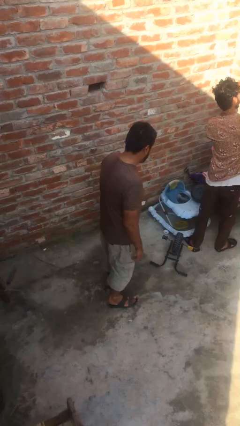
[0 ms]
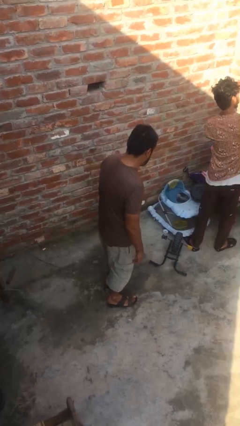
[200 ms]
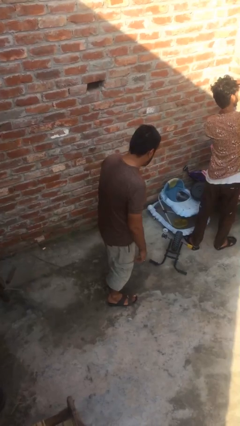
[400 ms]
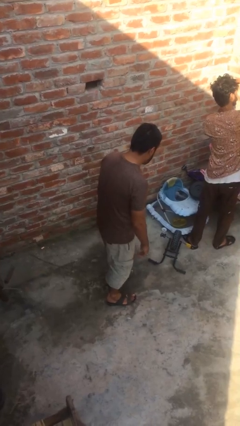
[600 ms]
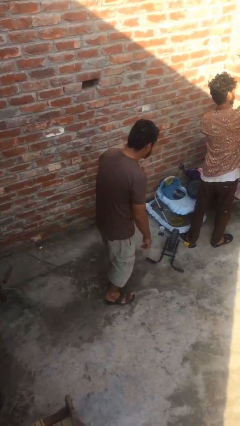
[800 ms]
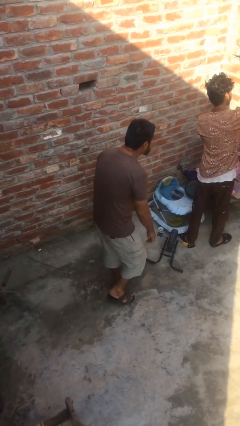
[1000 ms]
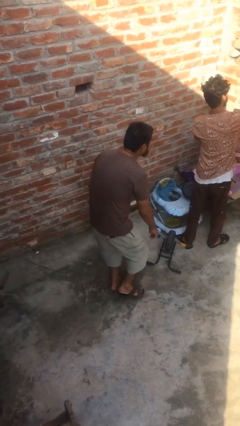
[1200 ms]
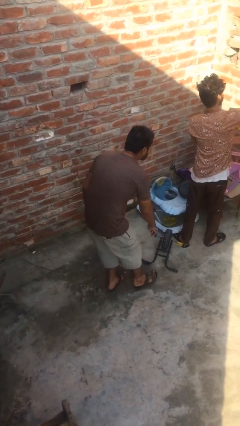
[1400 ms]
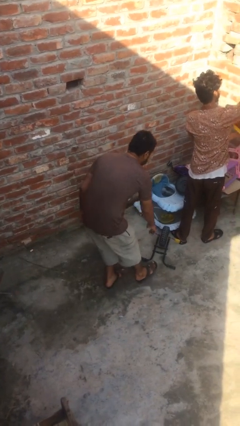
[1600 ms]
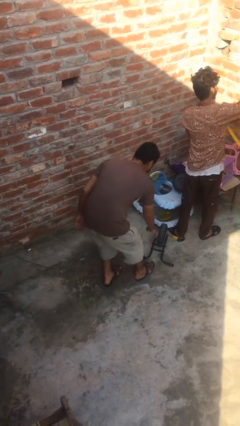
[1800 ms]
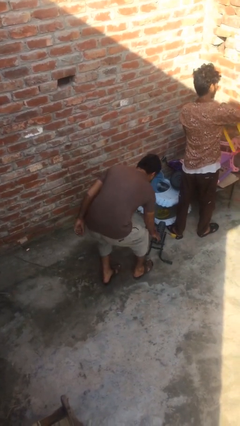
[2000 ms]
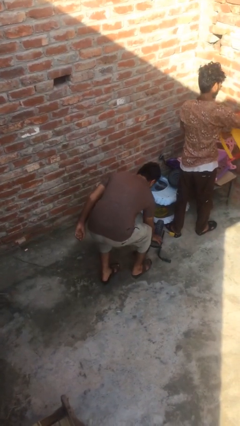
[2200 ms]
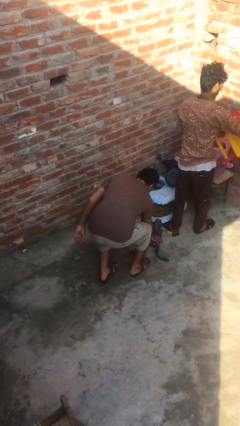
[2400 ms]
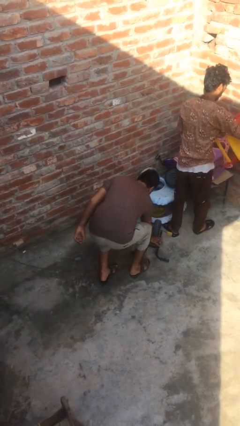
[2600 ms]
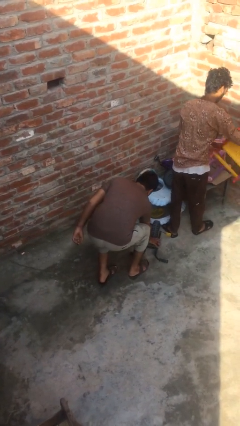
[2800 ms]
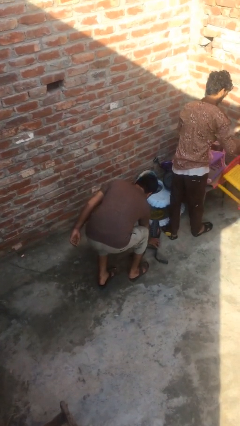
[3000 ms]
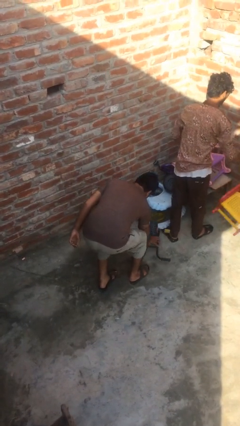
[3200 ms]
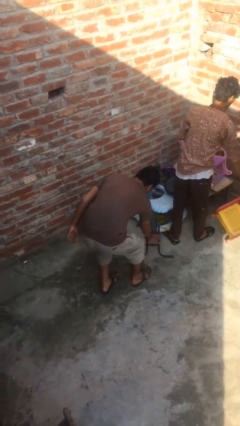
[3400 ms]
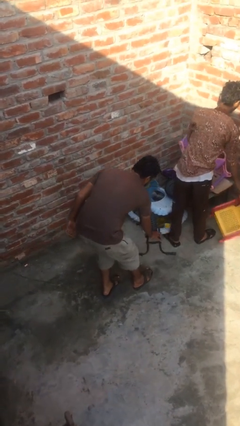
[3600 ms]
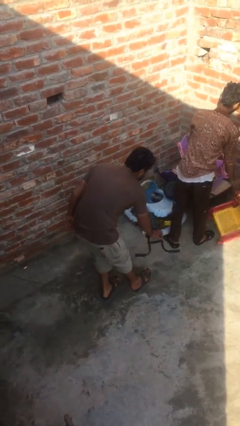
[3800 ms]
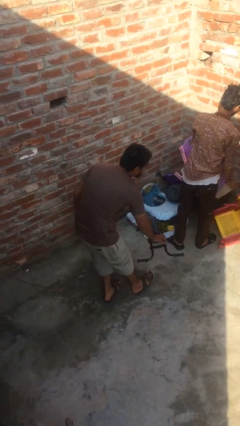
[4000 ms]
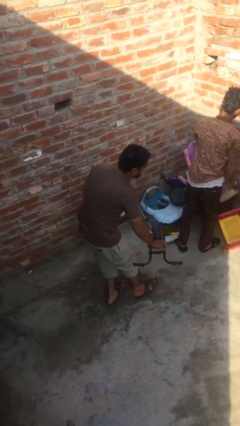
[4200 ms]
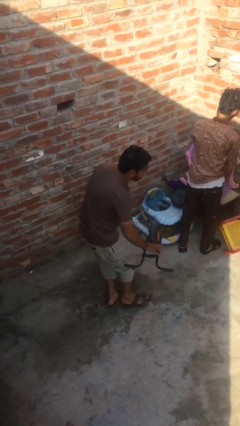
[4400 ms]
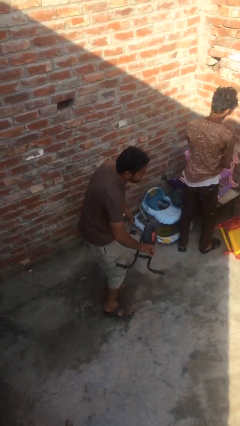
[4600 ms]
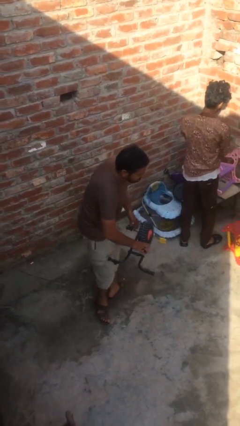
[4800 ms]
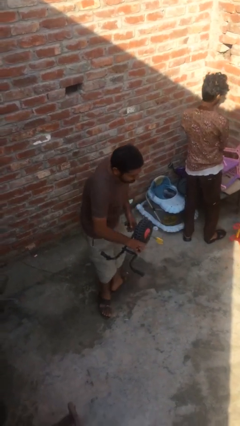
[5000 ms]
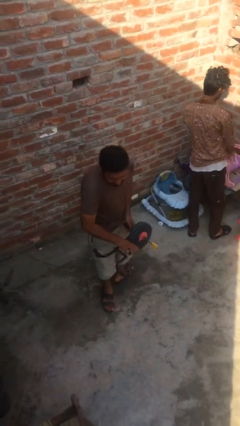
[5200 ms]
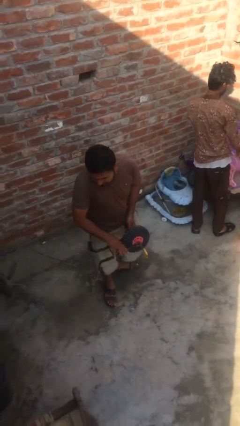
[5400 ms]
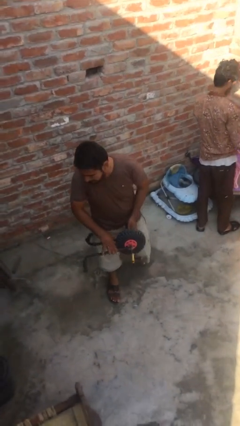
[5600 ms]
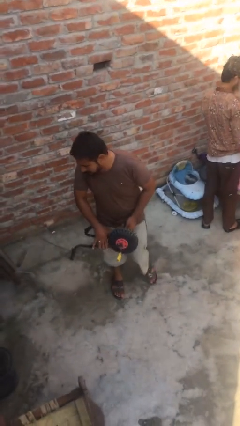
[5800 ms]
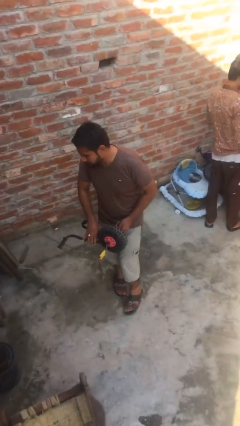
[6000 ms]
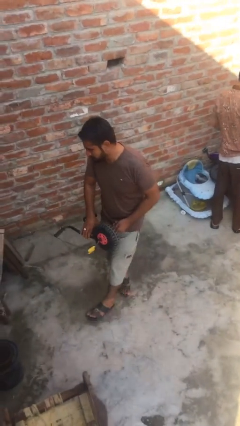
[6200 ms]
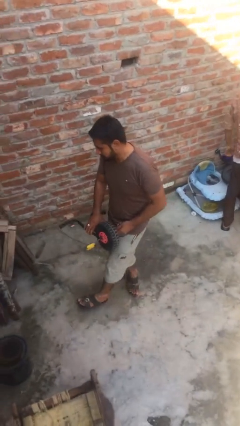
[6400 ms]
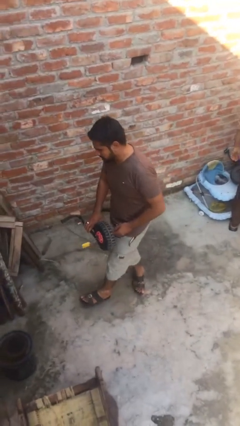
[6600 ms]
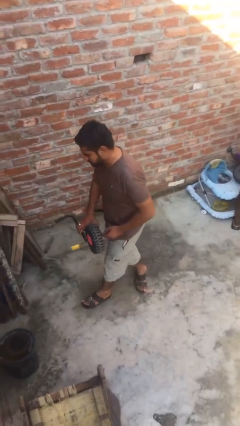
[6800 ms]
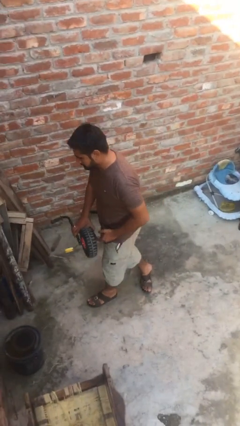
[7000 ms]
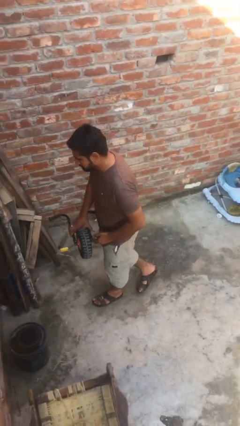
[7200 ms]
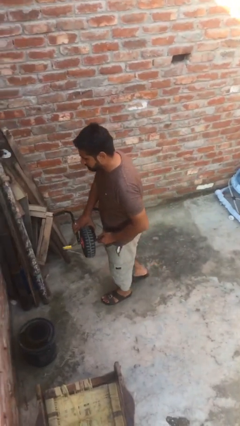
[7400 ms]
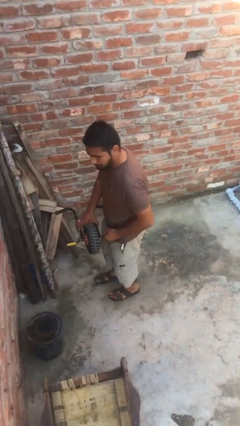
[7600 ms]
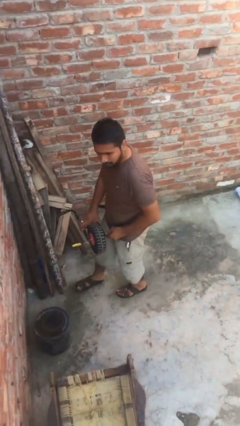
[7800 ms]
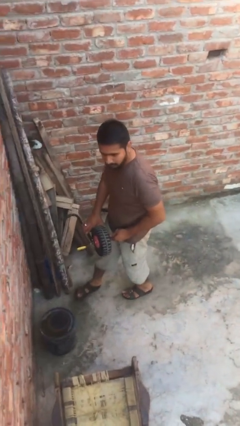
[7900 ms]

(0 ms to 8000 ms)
person steals object from person

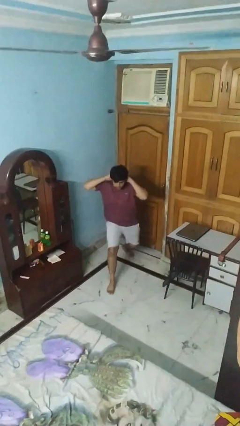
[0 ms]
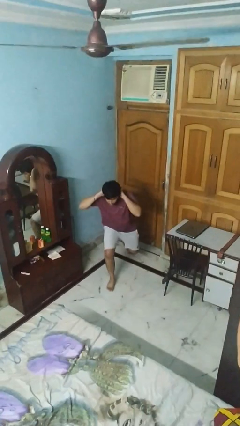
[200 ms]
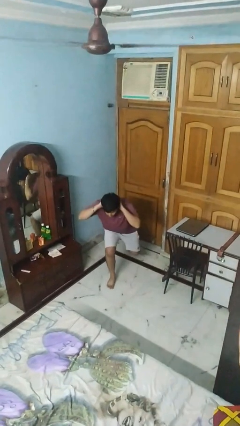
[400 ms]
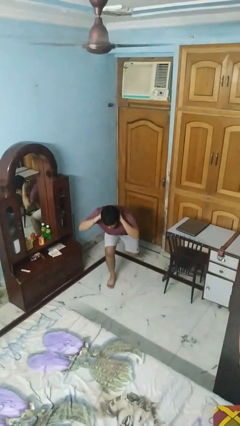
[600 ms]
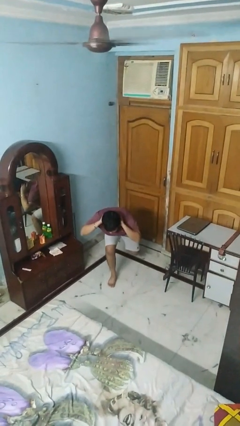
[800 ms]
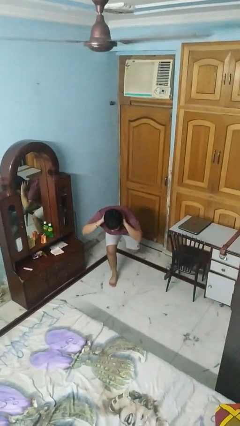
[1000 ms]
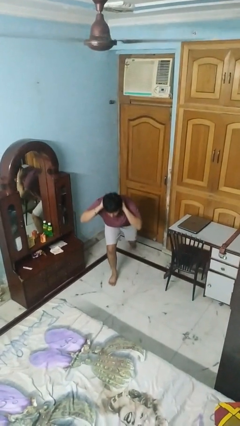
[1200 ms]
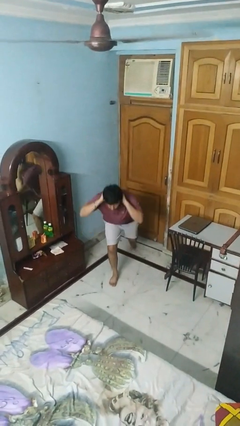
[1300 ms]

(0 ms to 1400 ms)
person exercises with lunges

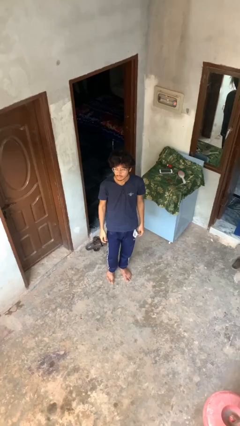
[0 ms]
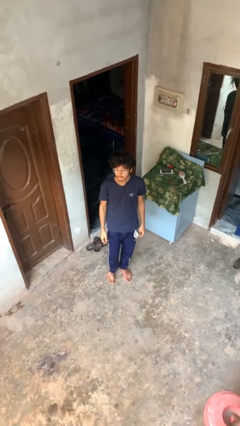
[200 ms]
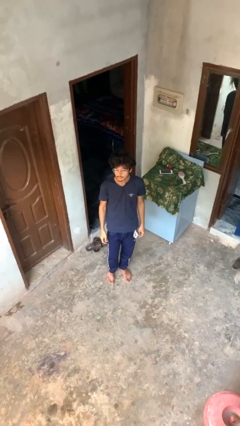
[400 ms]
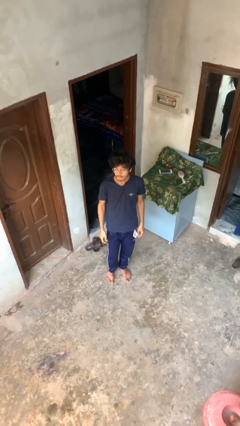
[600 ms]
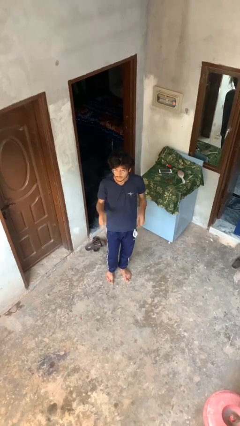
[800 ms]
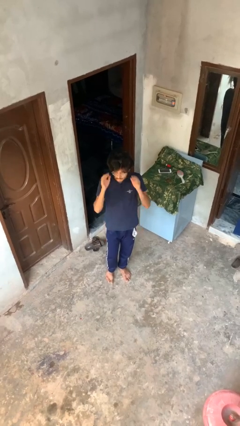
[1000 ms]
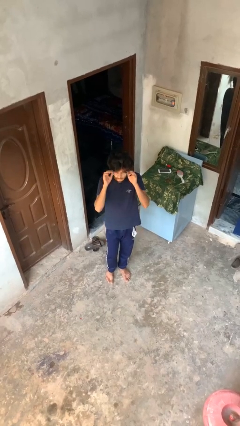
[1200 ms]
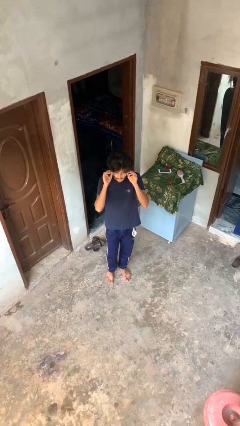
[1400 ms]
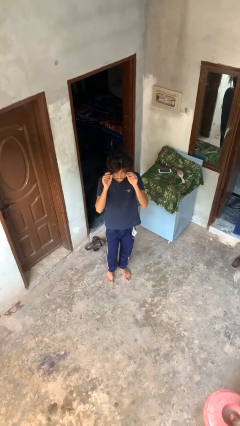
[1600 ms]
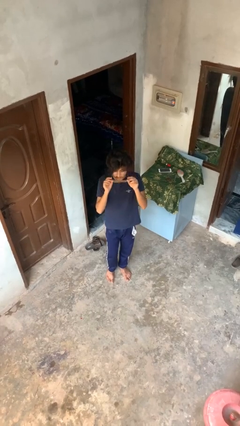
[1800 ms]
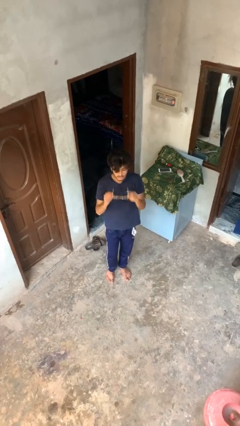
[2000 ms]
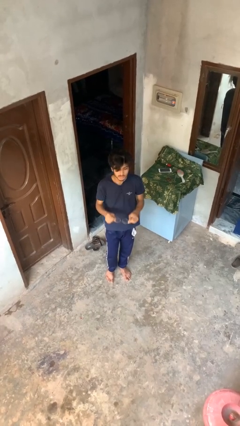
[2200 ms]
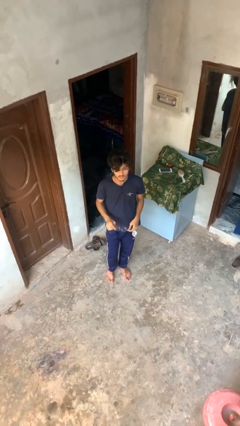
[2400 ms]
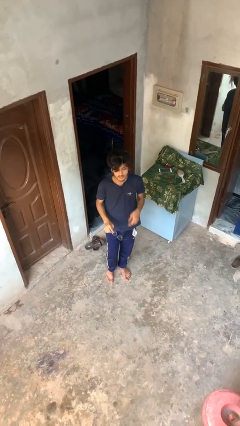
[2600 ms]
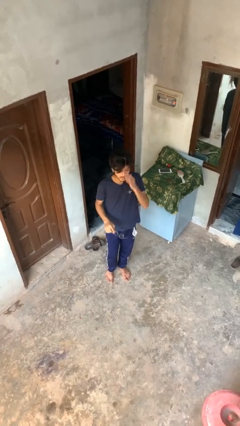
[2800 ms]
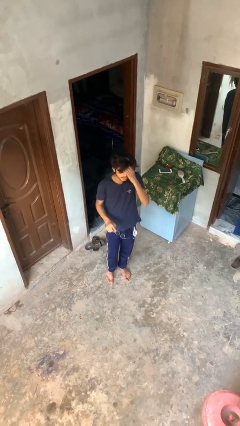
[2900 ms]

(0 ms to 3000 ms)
person takes off glasses

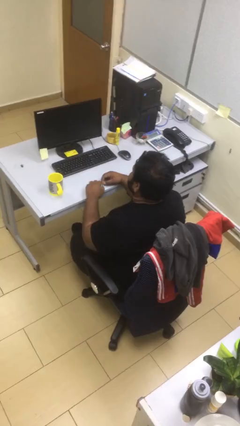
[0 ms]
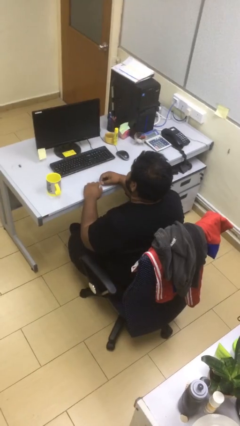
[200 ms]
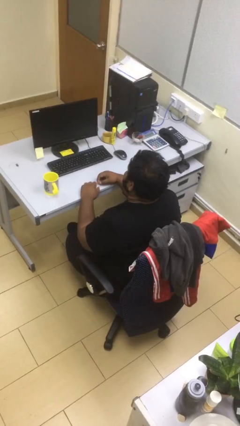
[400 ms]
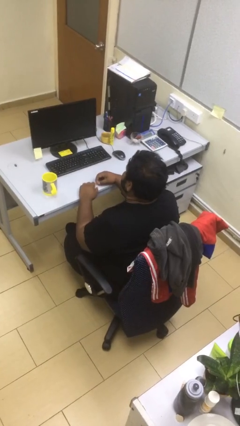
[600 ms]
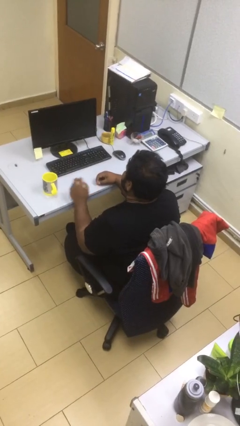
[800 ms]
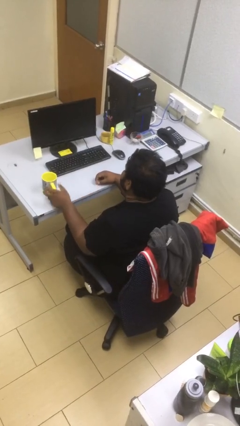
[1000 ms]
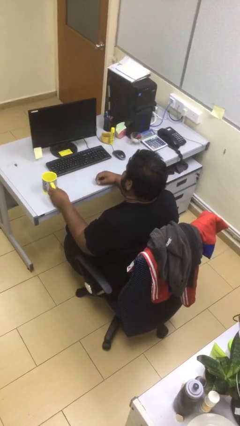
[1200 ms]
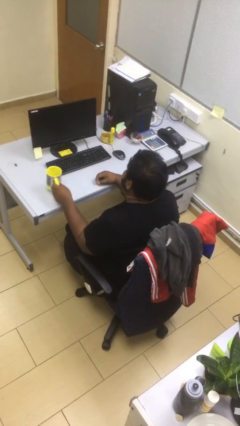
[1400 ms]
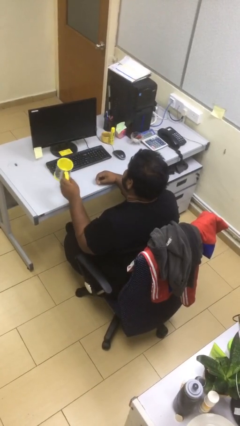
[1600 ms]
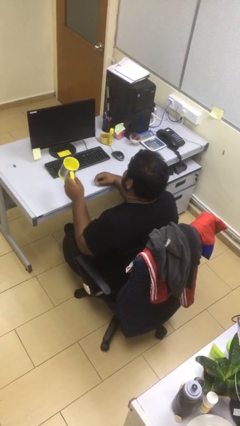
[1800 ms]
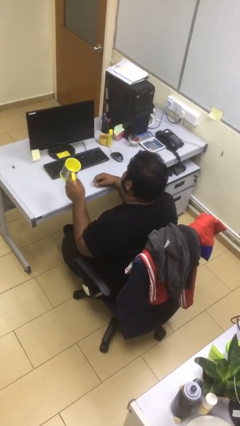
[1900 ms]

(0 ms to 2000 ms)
person picks up object from table

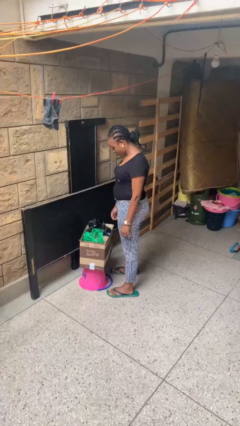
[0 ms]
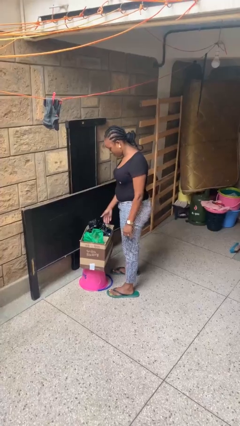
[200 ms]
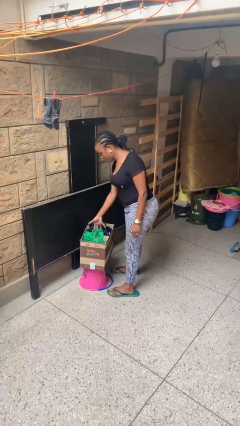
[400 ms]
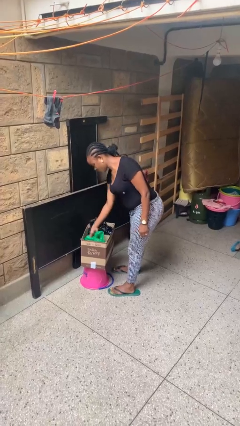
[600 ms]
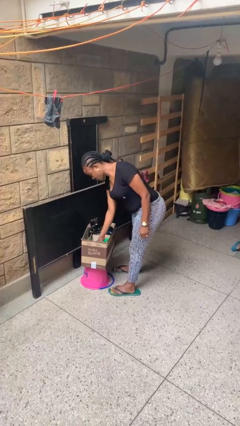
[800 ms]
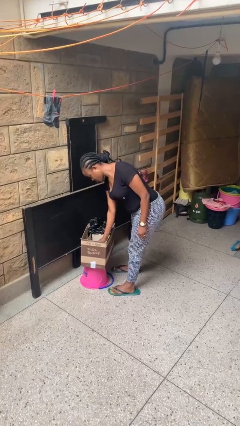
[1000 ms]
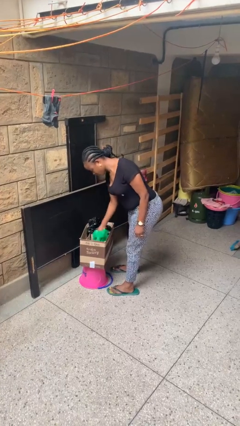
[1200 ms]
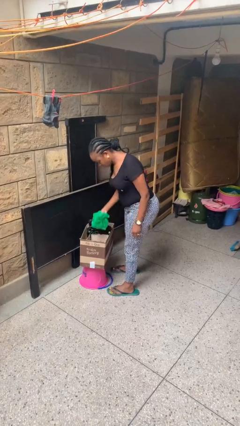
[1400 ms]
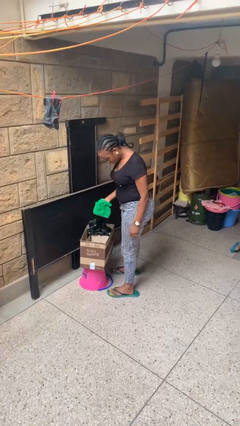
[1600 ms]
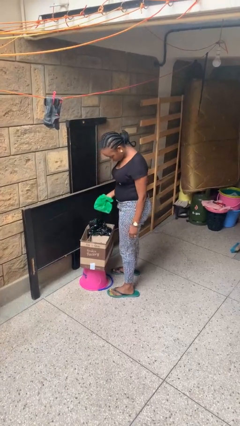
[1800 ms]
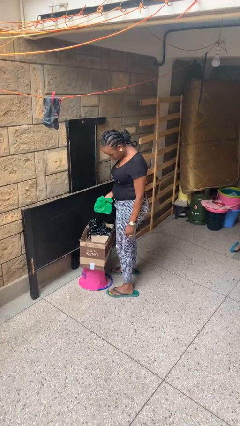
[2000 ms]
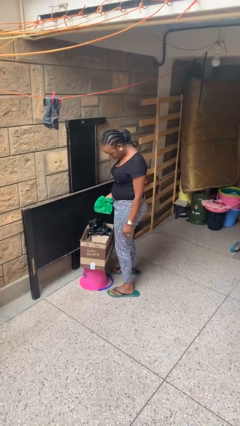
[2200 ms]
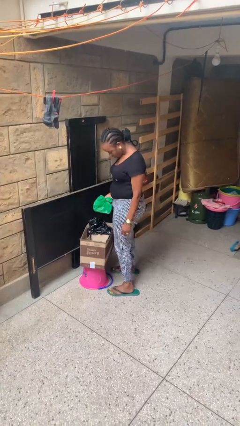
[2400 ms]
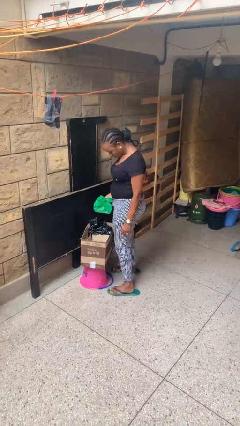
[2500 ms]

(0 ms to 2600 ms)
person takes object from box

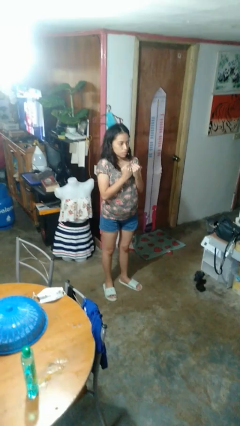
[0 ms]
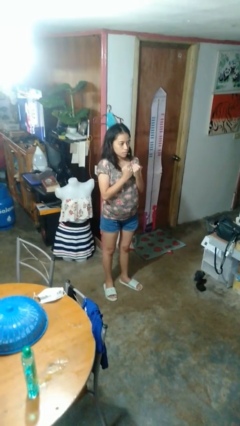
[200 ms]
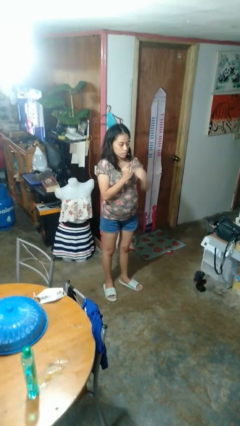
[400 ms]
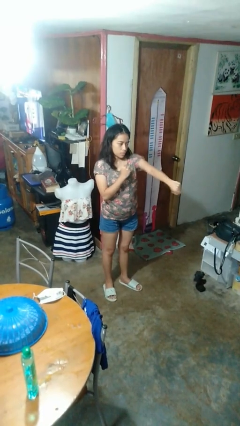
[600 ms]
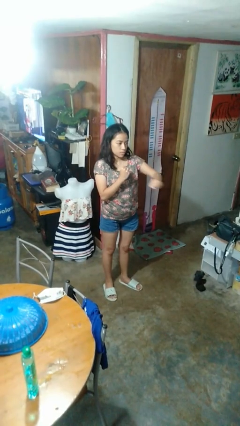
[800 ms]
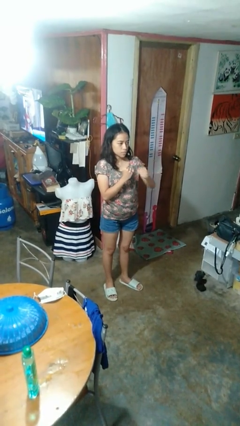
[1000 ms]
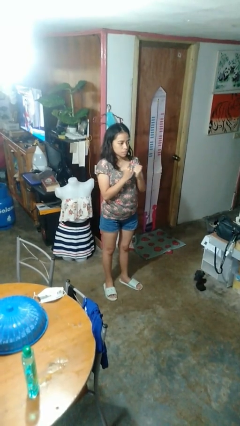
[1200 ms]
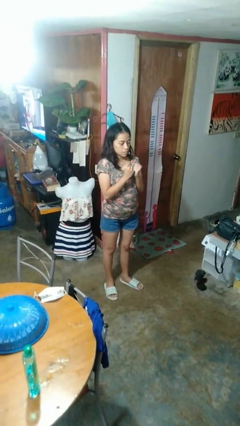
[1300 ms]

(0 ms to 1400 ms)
person punches
